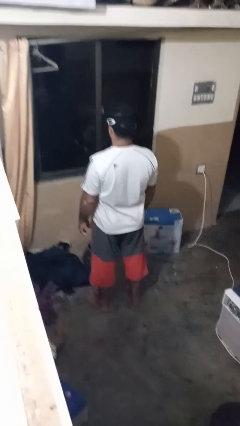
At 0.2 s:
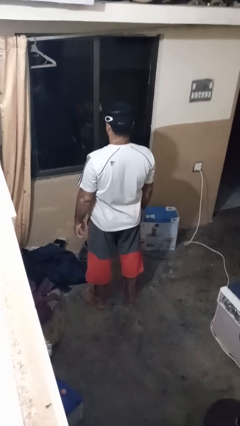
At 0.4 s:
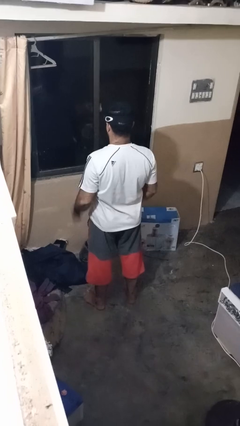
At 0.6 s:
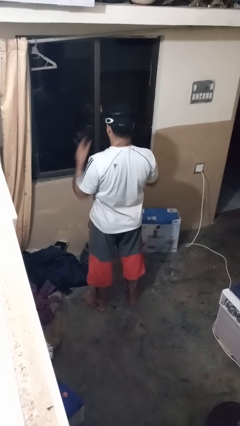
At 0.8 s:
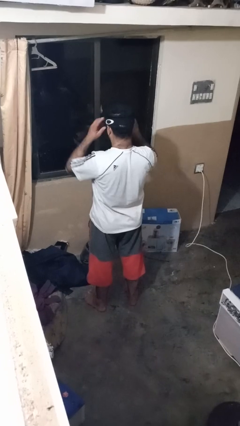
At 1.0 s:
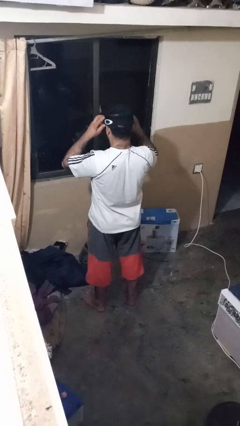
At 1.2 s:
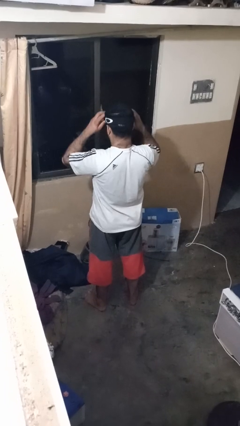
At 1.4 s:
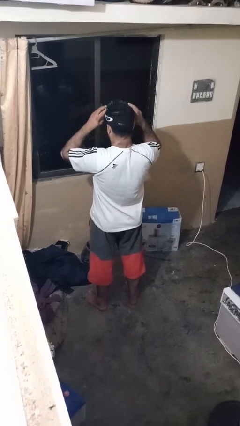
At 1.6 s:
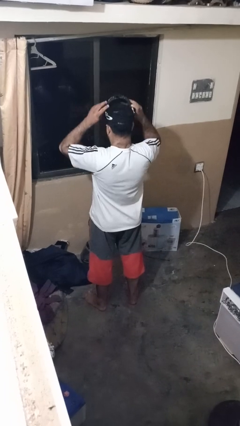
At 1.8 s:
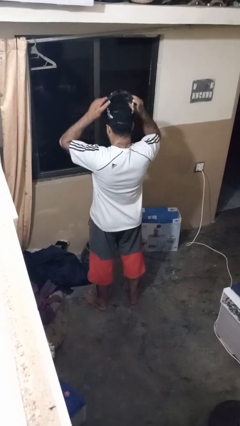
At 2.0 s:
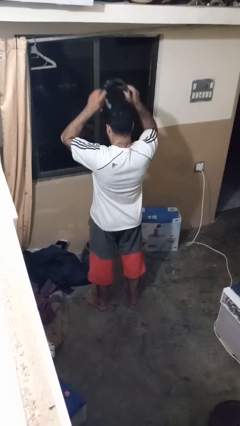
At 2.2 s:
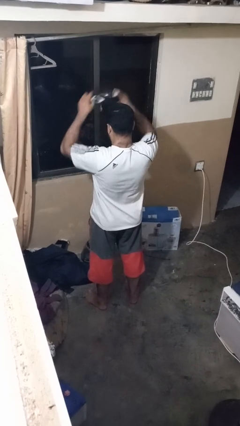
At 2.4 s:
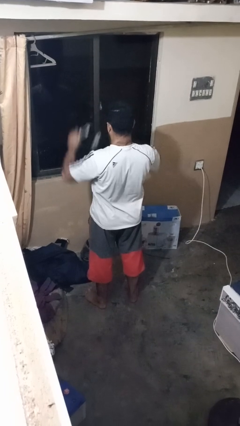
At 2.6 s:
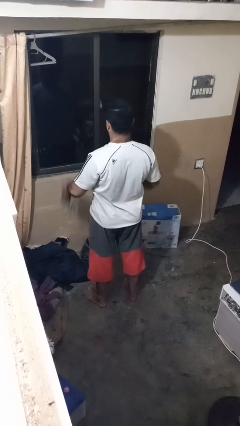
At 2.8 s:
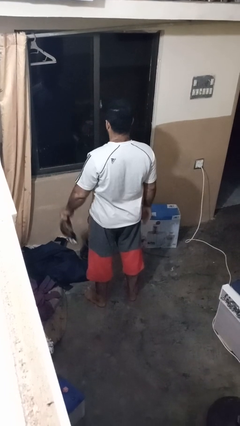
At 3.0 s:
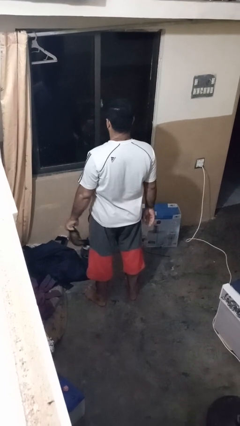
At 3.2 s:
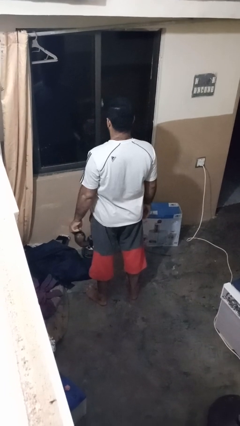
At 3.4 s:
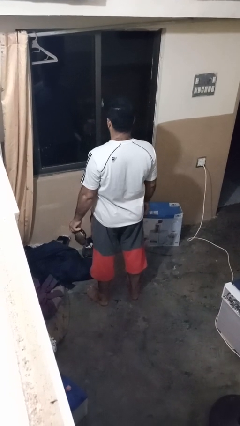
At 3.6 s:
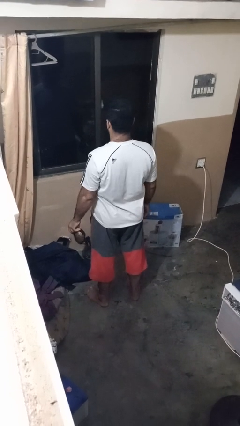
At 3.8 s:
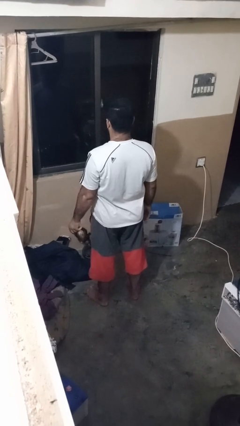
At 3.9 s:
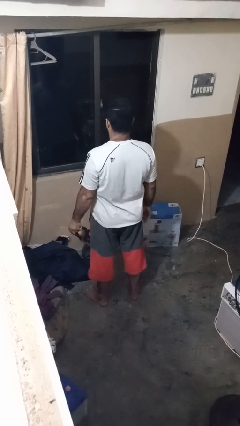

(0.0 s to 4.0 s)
person takes off sunglasses

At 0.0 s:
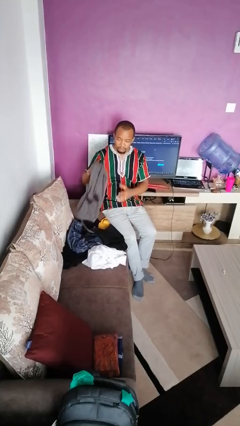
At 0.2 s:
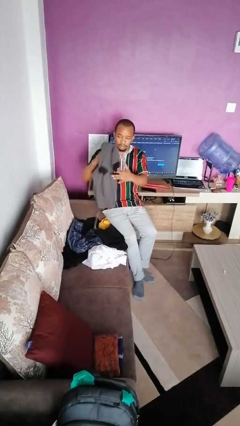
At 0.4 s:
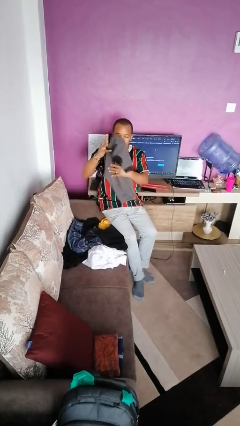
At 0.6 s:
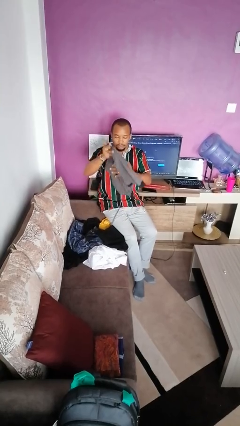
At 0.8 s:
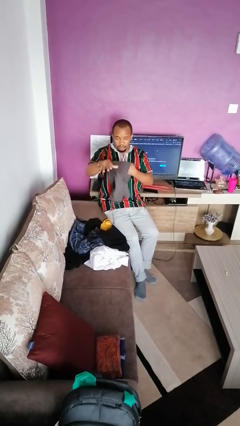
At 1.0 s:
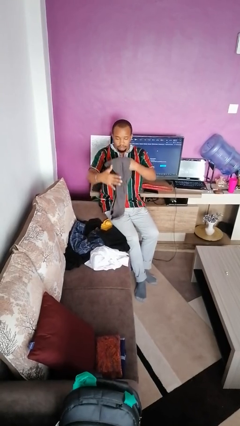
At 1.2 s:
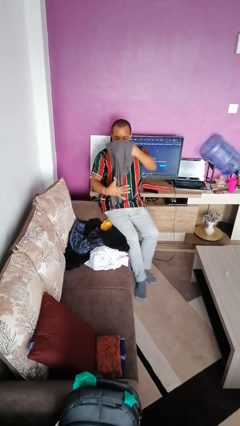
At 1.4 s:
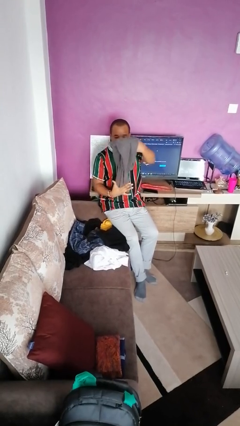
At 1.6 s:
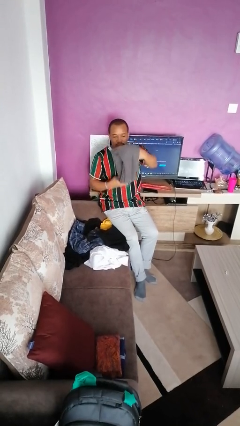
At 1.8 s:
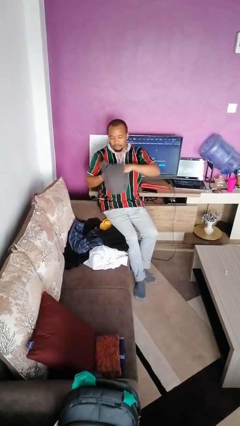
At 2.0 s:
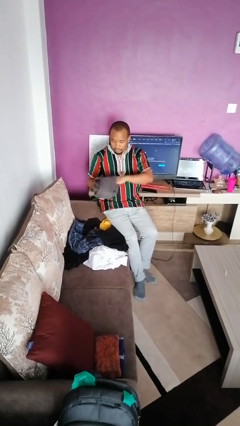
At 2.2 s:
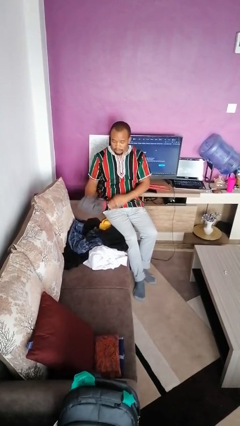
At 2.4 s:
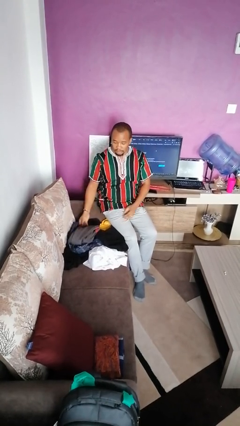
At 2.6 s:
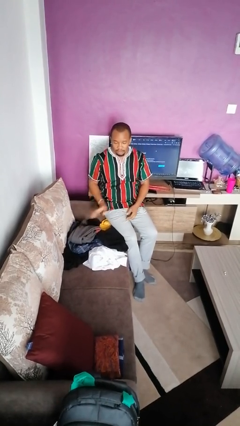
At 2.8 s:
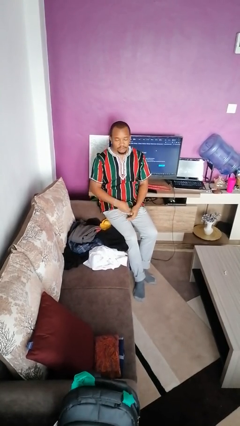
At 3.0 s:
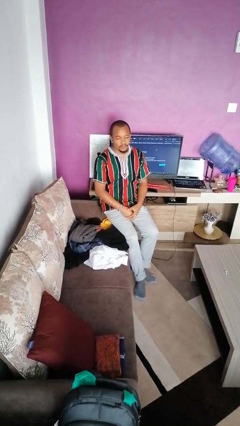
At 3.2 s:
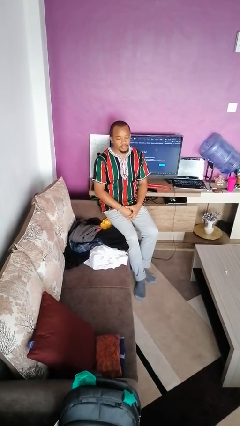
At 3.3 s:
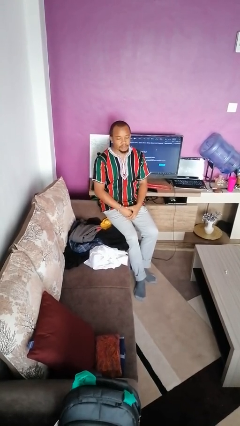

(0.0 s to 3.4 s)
person folds pants

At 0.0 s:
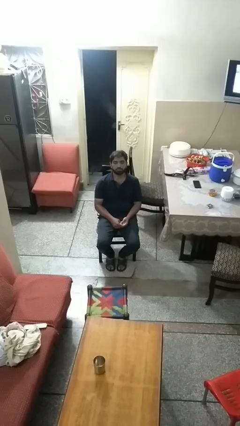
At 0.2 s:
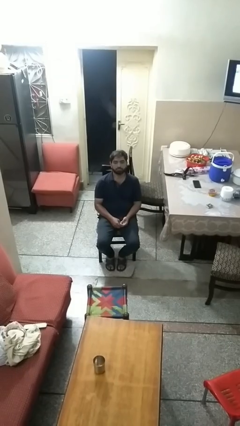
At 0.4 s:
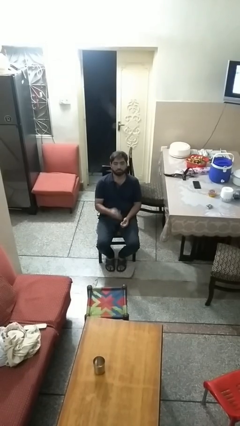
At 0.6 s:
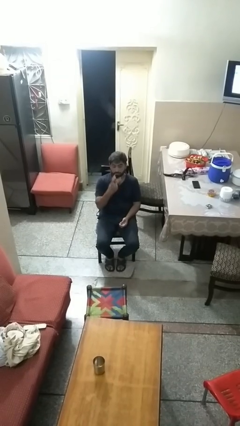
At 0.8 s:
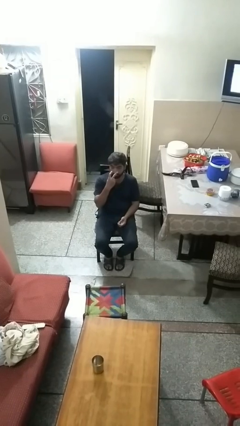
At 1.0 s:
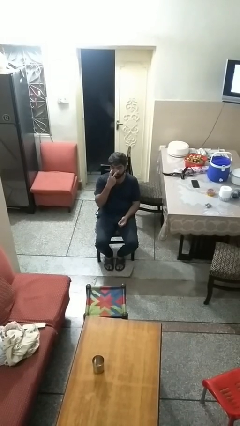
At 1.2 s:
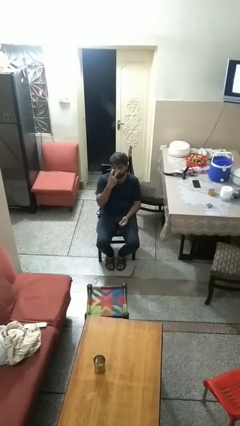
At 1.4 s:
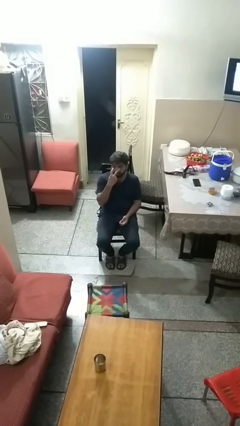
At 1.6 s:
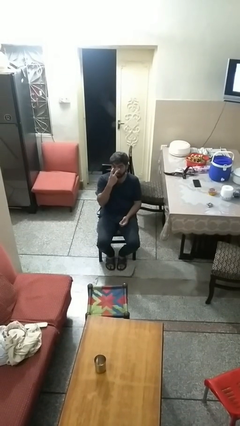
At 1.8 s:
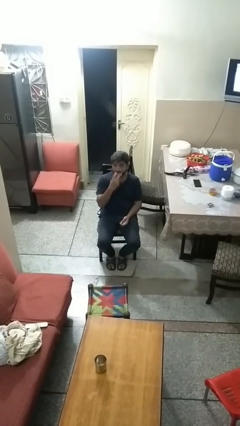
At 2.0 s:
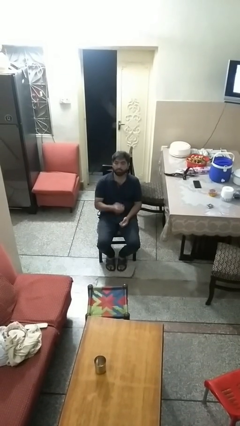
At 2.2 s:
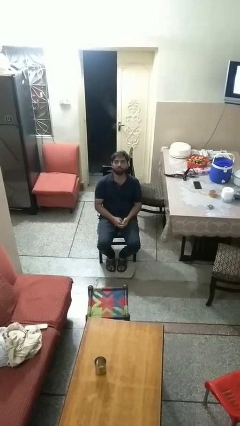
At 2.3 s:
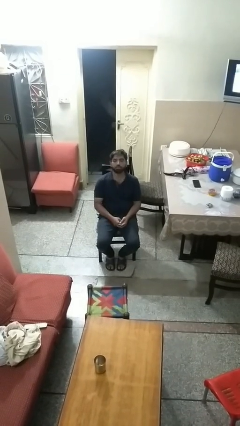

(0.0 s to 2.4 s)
person gestures watch closely

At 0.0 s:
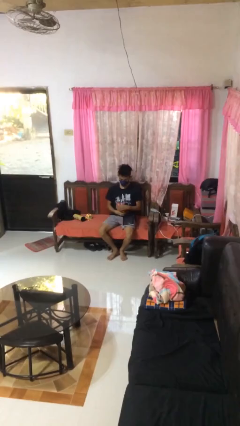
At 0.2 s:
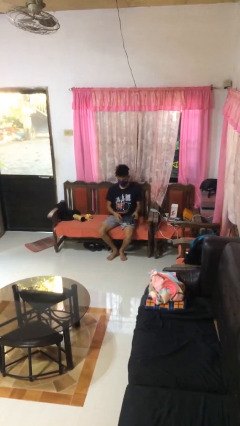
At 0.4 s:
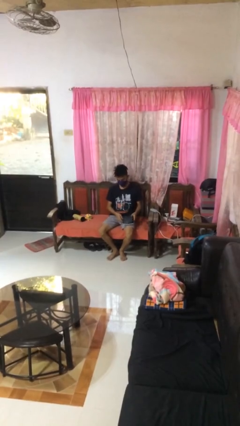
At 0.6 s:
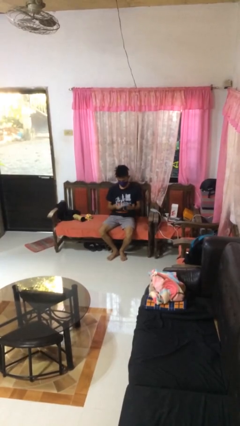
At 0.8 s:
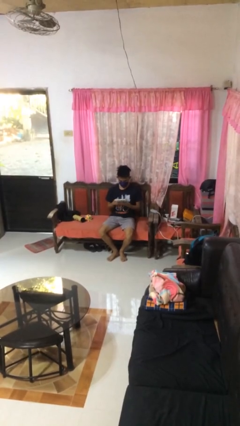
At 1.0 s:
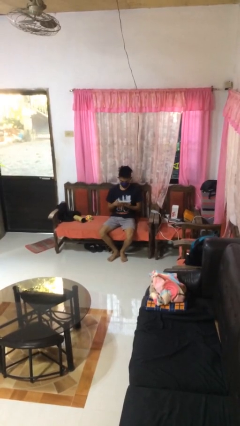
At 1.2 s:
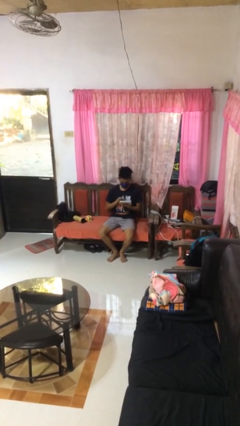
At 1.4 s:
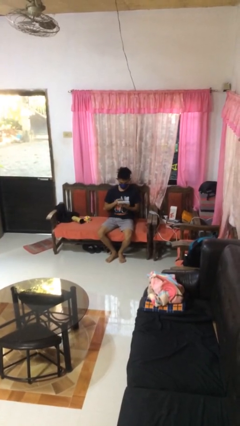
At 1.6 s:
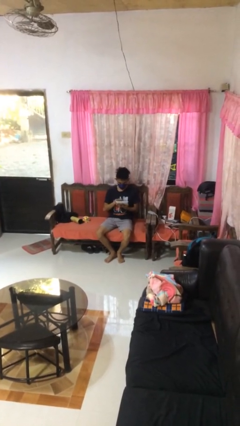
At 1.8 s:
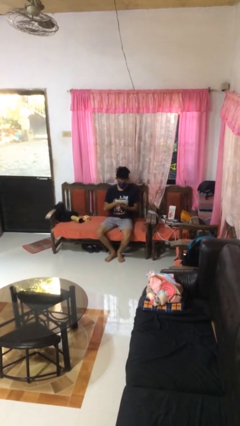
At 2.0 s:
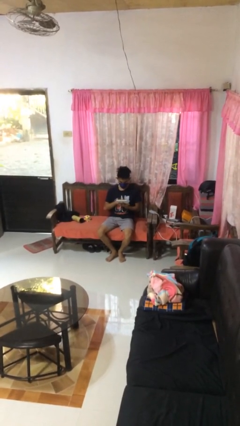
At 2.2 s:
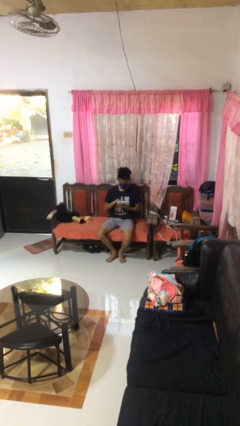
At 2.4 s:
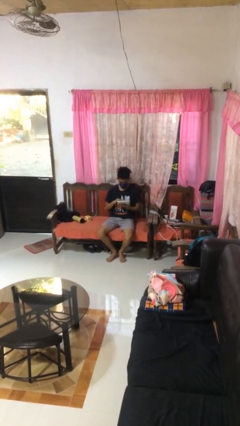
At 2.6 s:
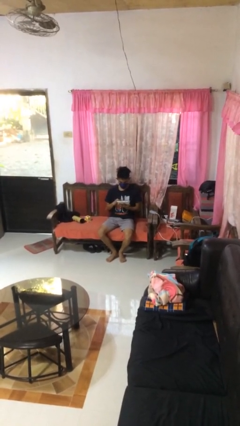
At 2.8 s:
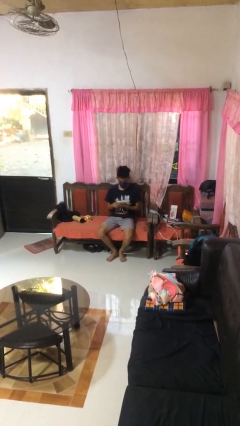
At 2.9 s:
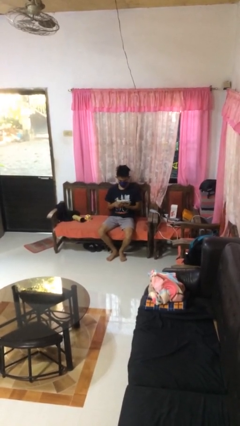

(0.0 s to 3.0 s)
person interacts with tablet

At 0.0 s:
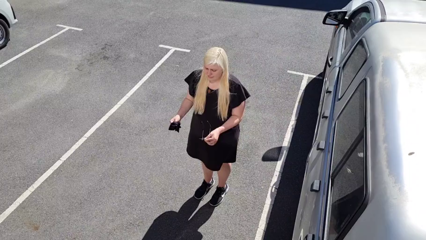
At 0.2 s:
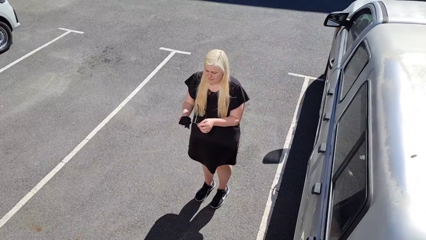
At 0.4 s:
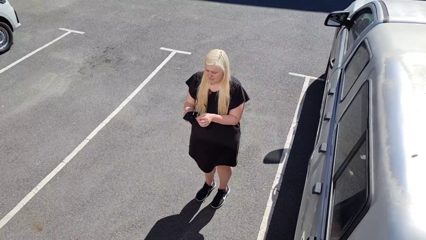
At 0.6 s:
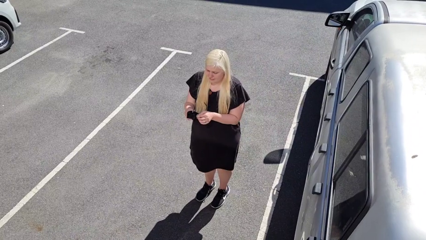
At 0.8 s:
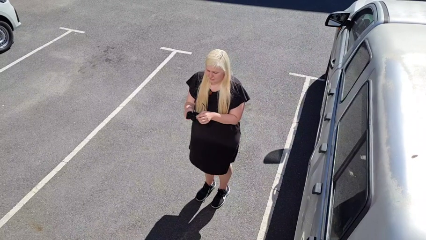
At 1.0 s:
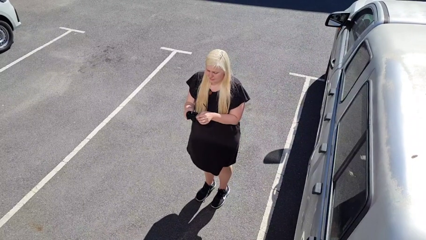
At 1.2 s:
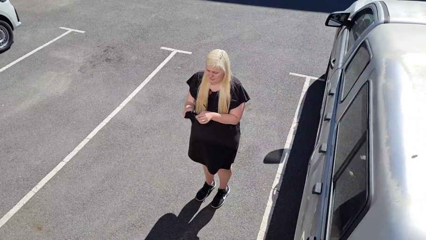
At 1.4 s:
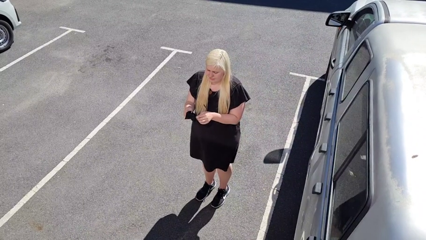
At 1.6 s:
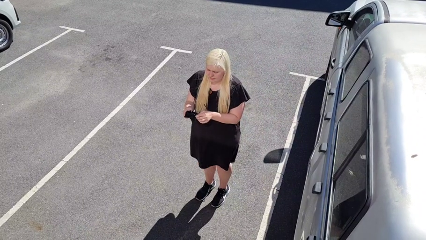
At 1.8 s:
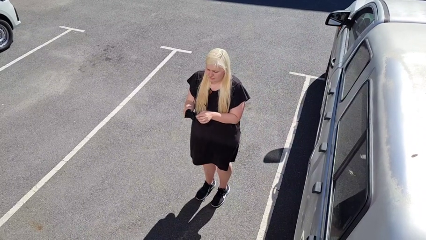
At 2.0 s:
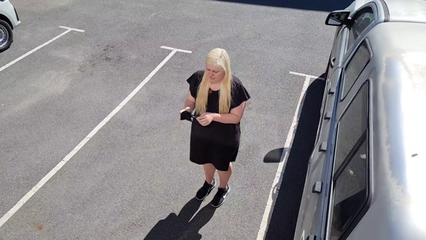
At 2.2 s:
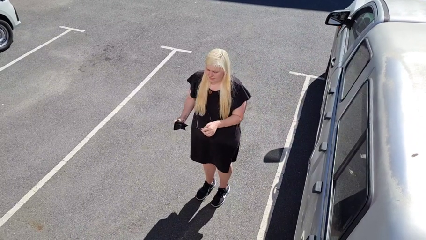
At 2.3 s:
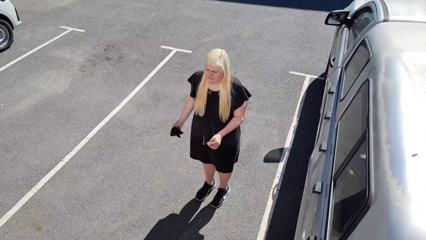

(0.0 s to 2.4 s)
person cleans eyeglasses

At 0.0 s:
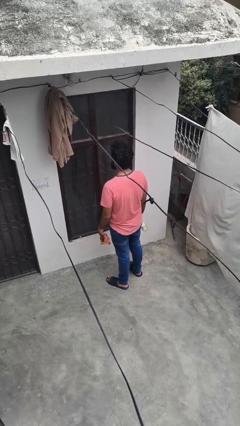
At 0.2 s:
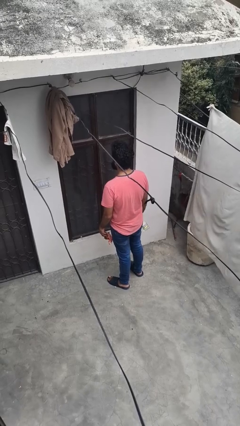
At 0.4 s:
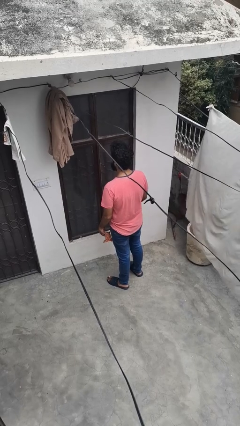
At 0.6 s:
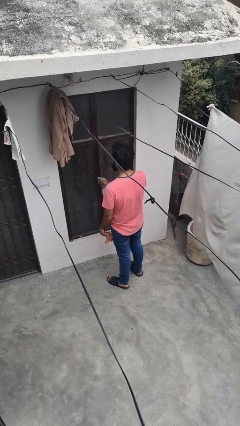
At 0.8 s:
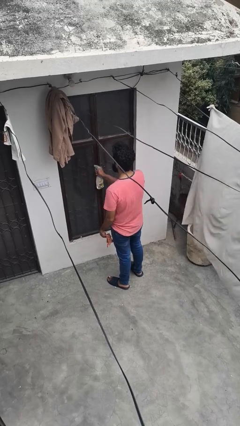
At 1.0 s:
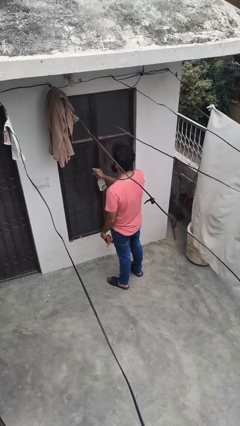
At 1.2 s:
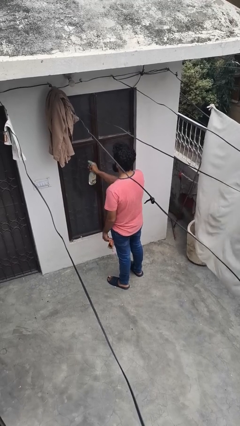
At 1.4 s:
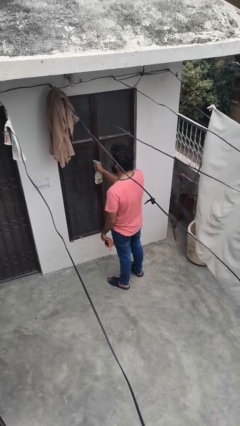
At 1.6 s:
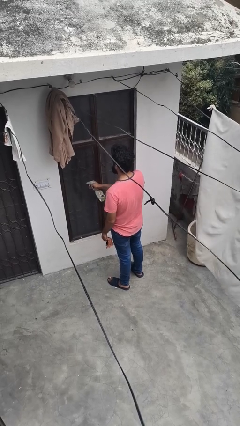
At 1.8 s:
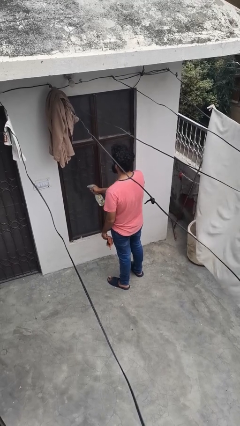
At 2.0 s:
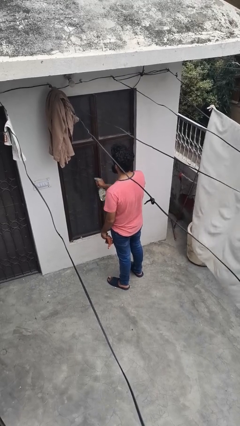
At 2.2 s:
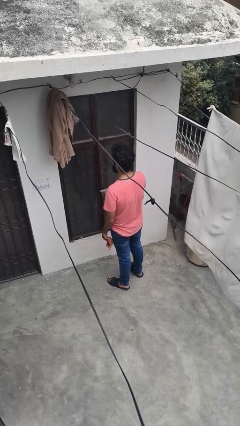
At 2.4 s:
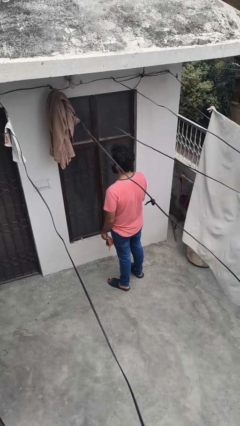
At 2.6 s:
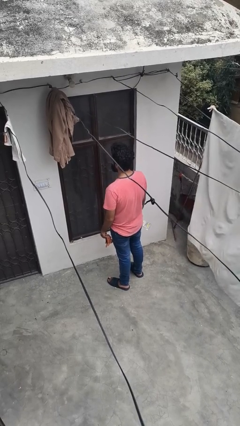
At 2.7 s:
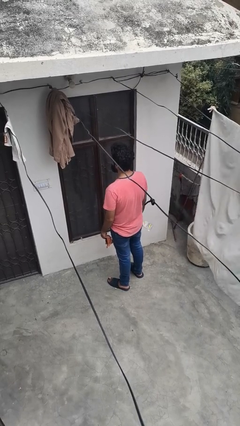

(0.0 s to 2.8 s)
person sprays from bottle
